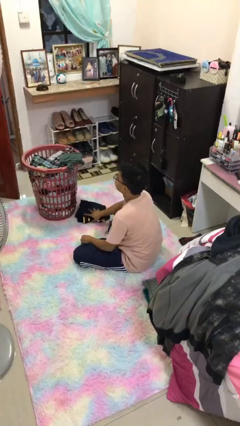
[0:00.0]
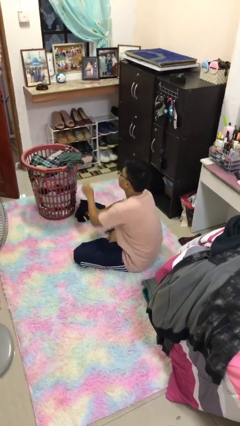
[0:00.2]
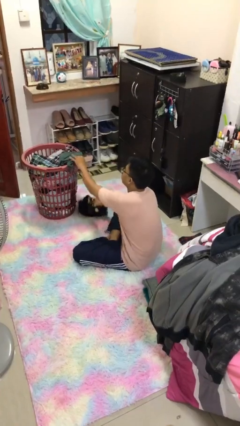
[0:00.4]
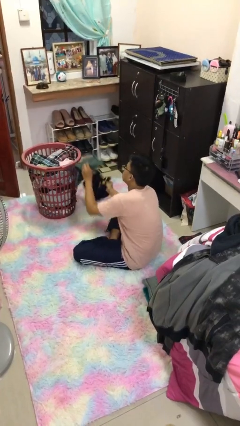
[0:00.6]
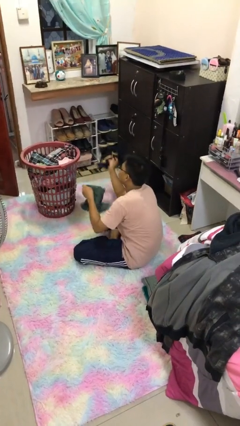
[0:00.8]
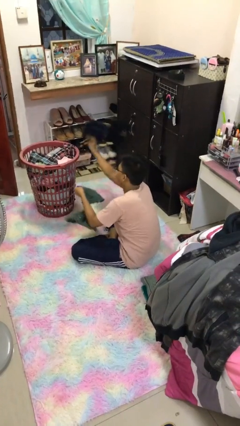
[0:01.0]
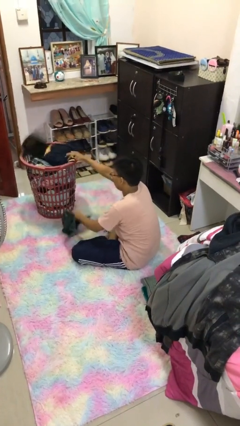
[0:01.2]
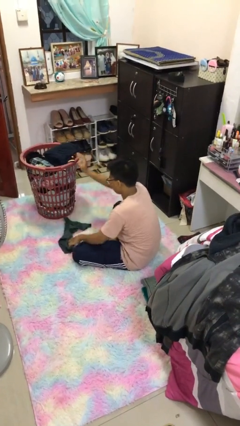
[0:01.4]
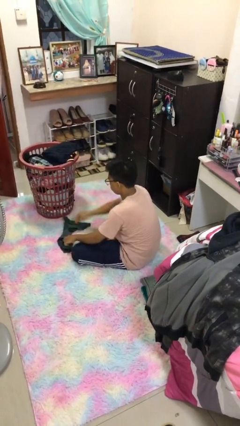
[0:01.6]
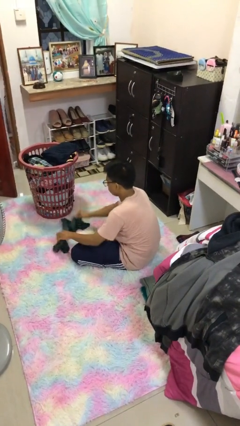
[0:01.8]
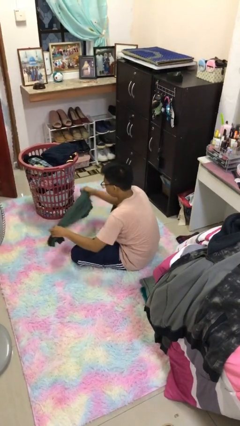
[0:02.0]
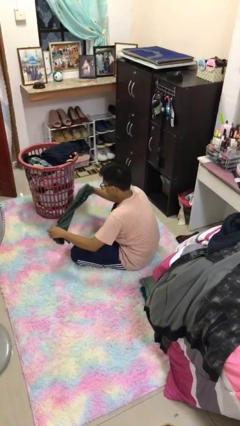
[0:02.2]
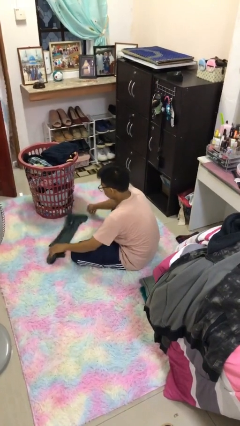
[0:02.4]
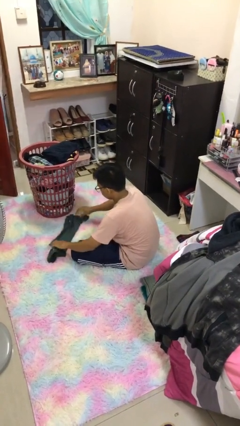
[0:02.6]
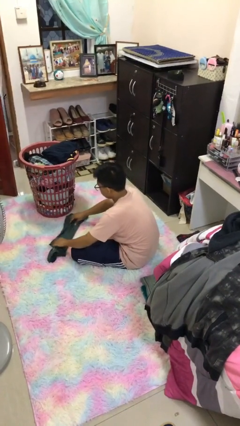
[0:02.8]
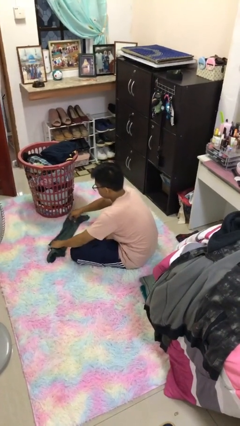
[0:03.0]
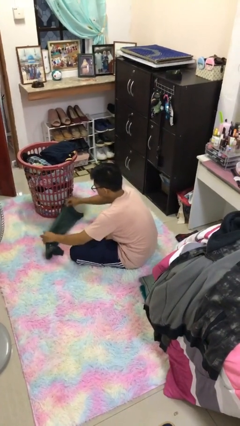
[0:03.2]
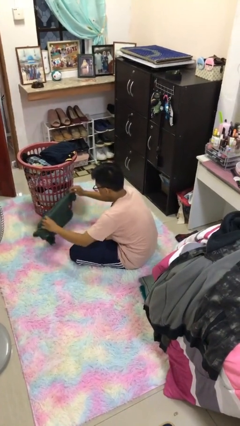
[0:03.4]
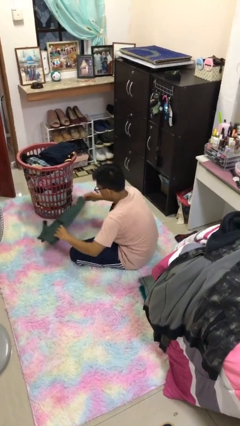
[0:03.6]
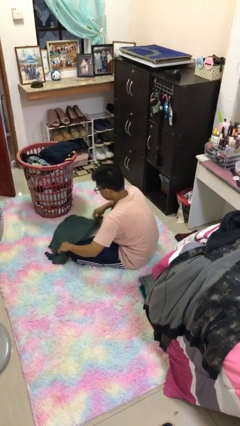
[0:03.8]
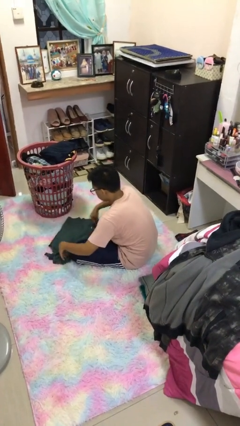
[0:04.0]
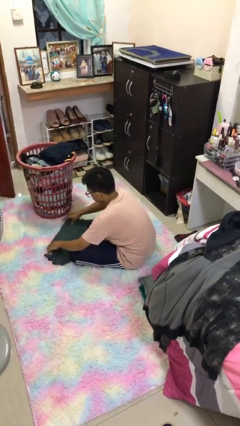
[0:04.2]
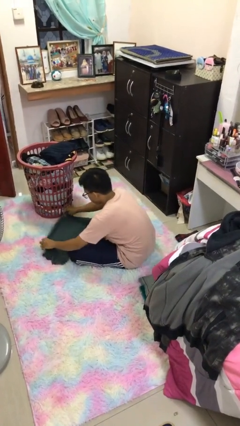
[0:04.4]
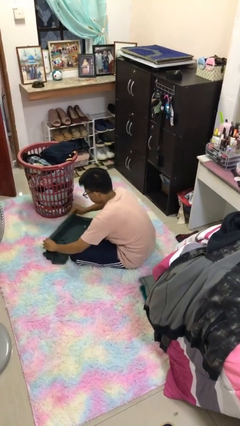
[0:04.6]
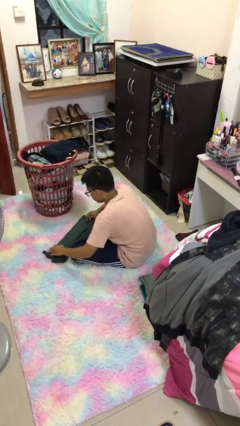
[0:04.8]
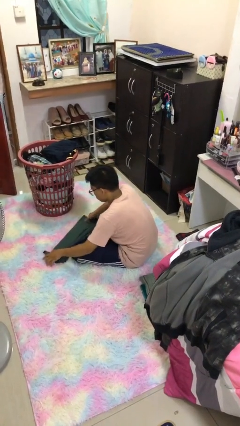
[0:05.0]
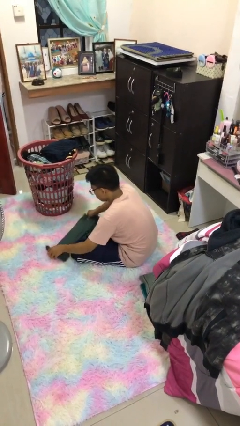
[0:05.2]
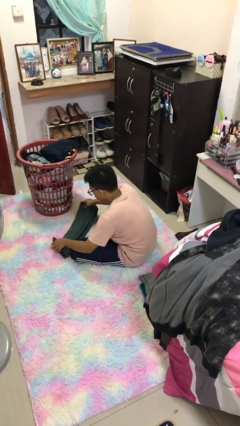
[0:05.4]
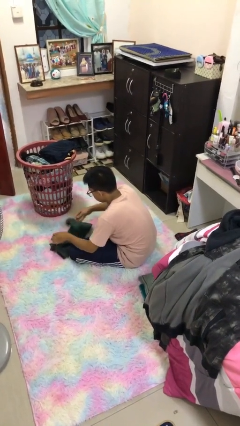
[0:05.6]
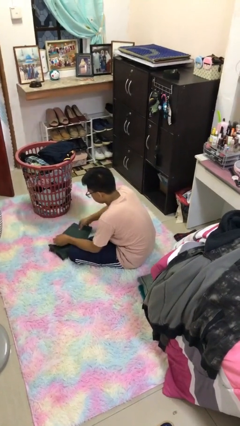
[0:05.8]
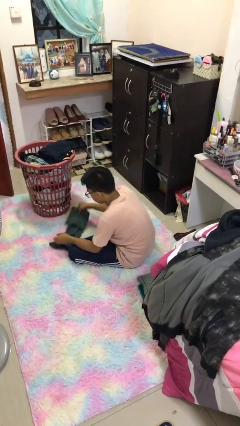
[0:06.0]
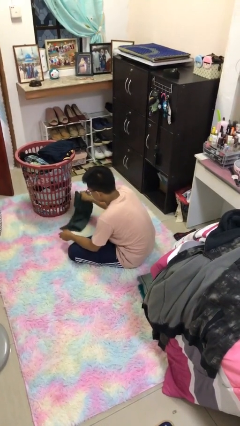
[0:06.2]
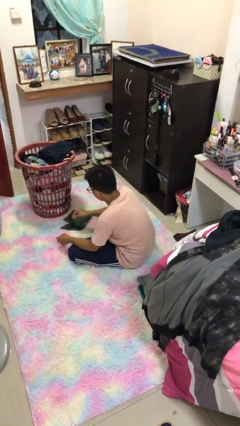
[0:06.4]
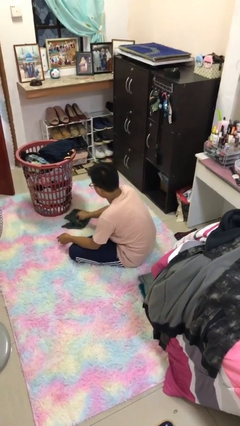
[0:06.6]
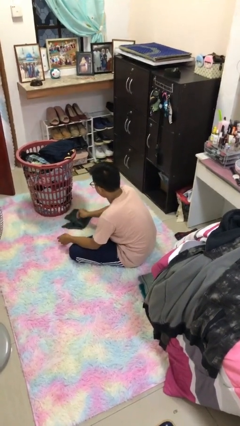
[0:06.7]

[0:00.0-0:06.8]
person folds shirt

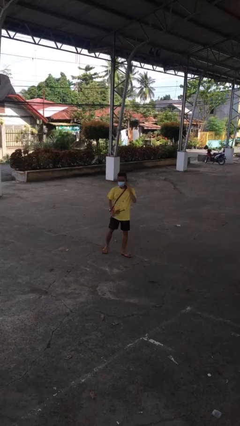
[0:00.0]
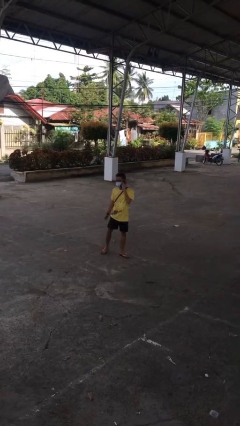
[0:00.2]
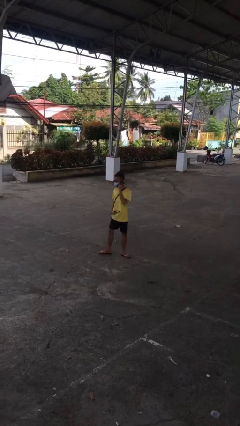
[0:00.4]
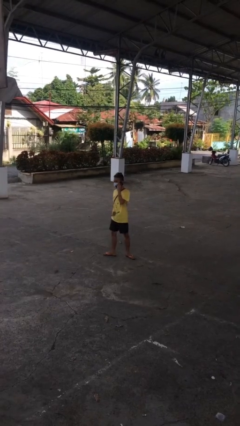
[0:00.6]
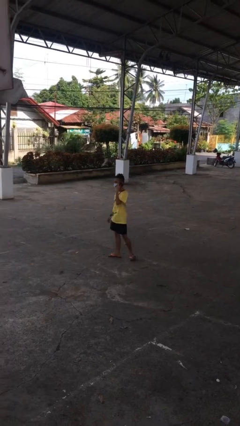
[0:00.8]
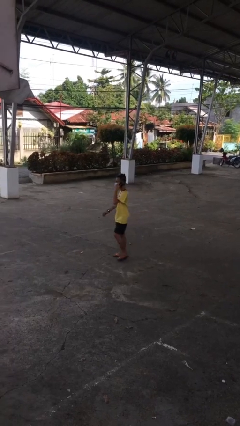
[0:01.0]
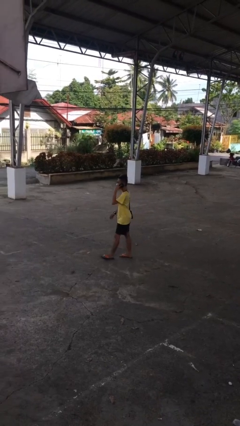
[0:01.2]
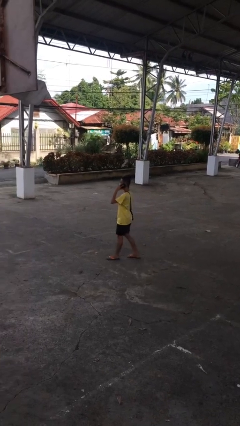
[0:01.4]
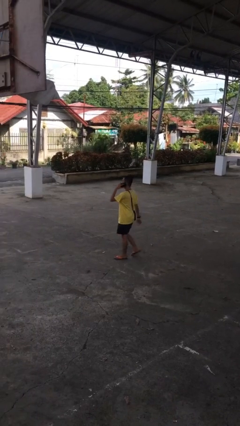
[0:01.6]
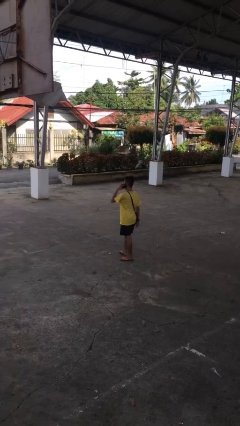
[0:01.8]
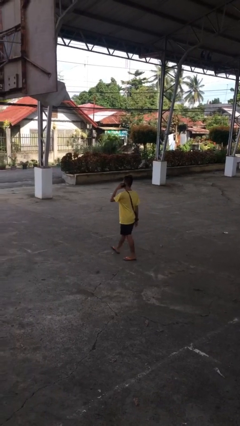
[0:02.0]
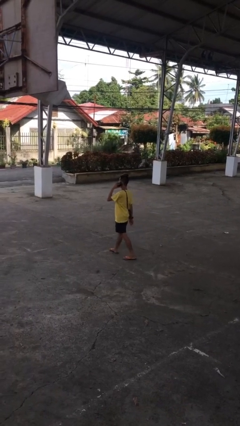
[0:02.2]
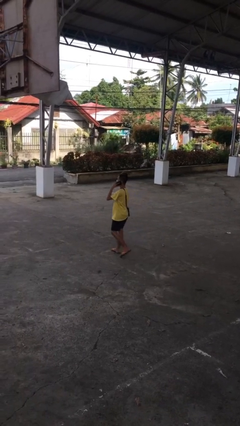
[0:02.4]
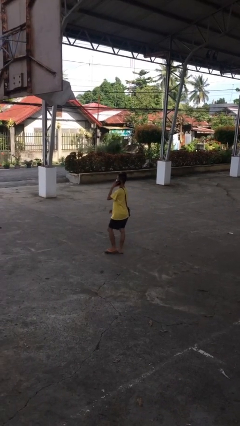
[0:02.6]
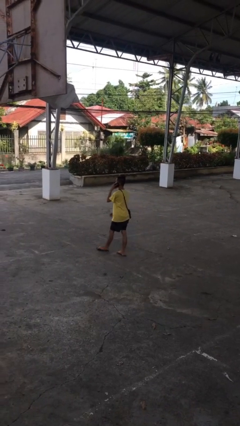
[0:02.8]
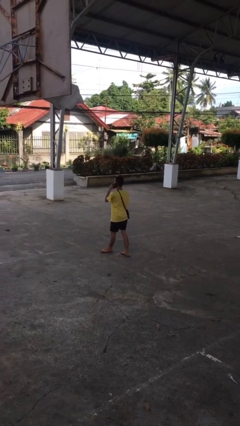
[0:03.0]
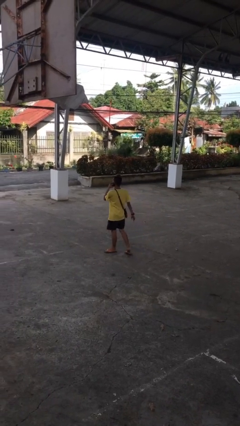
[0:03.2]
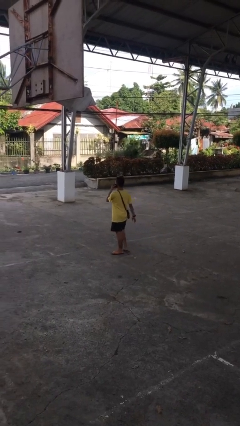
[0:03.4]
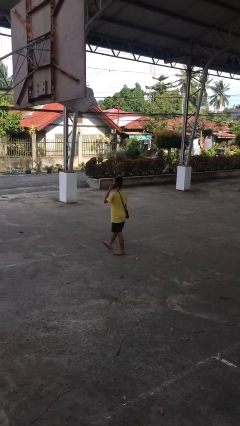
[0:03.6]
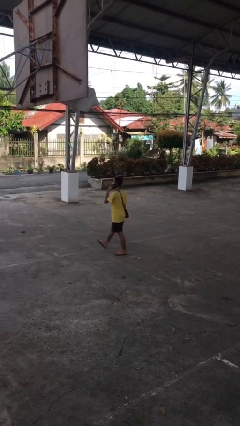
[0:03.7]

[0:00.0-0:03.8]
person talks on phone

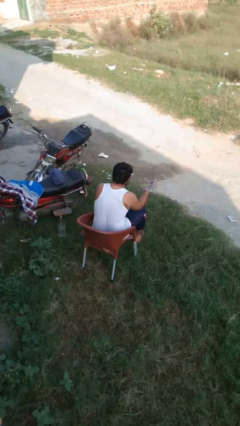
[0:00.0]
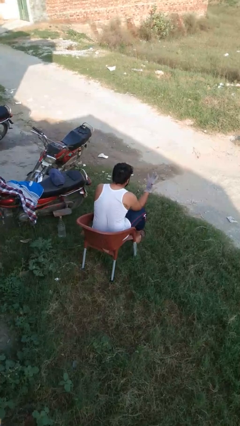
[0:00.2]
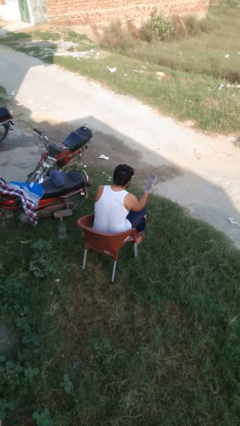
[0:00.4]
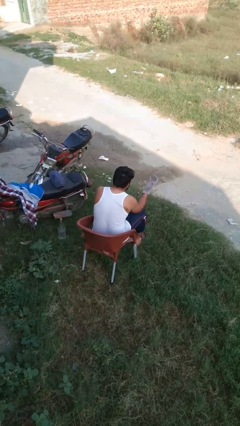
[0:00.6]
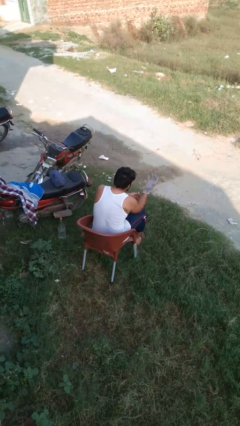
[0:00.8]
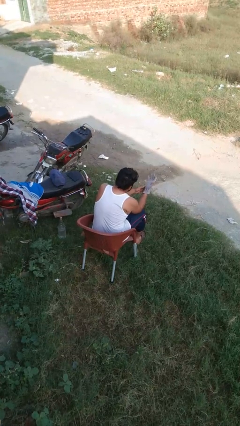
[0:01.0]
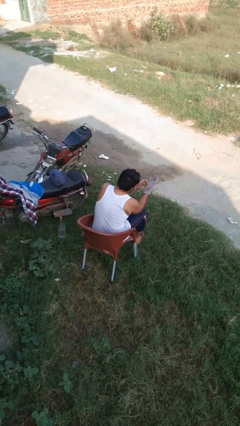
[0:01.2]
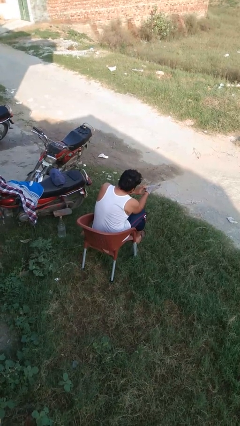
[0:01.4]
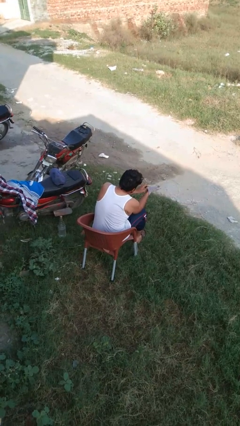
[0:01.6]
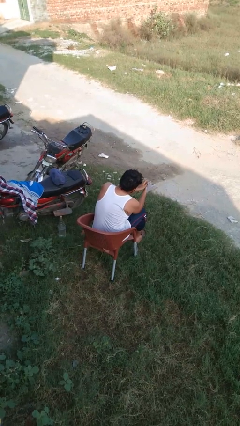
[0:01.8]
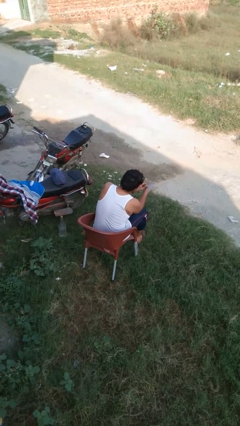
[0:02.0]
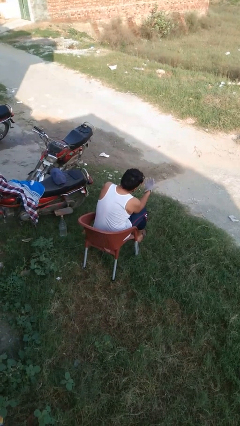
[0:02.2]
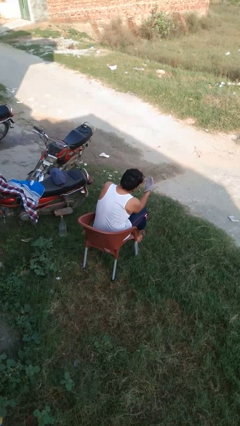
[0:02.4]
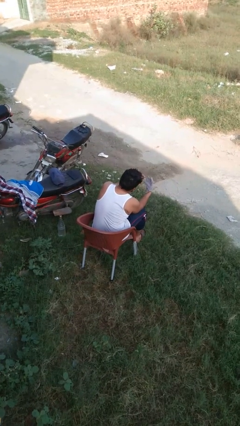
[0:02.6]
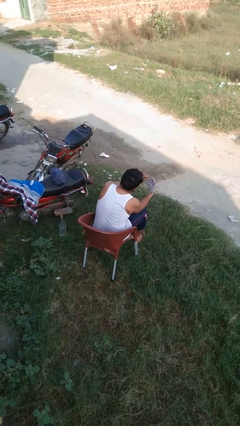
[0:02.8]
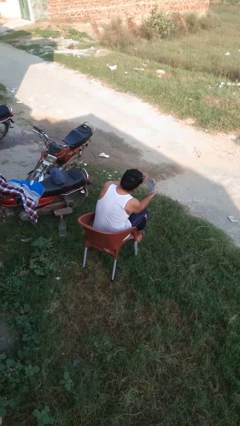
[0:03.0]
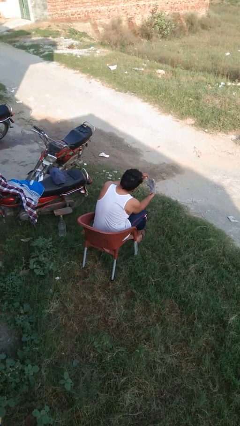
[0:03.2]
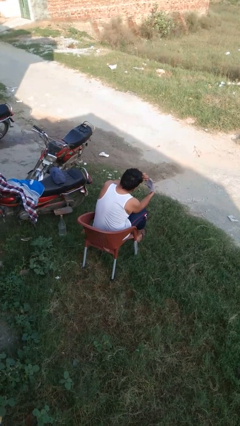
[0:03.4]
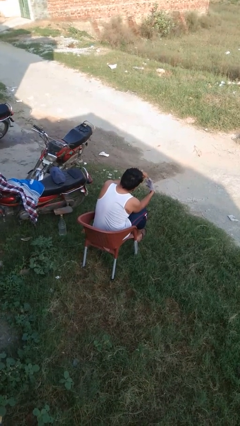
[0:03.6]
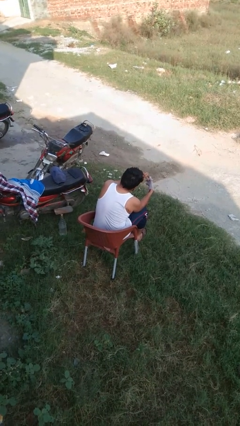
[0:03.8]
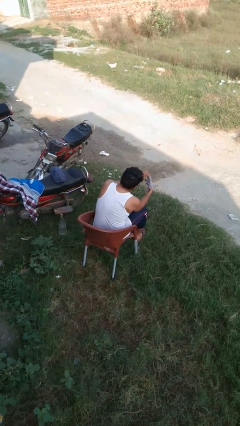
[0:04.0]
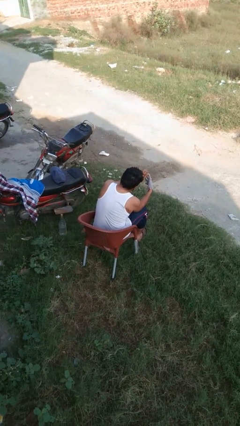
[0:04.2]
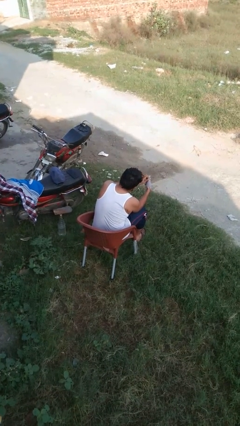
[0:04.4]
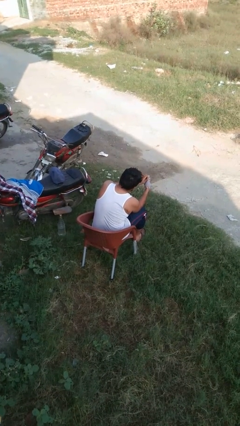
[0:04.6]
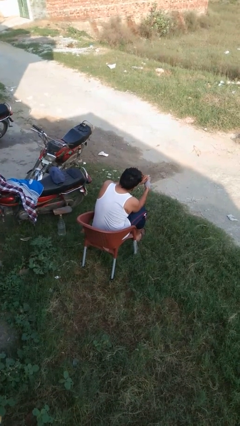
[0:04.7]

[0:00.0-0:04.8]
person takes off gloves

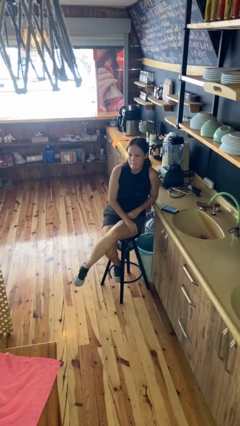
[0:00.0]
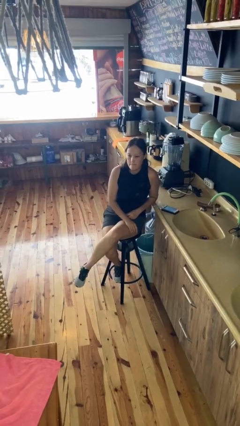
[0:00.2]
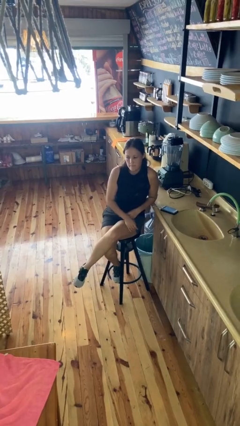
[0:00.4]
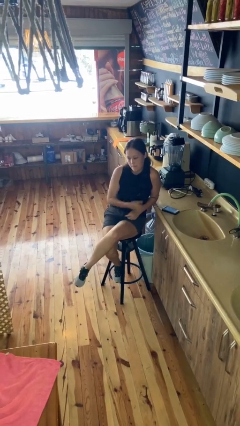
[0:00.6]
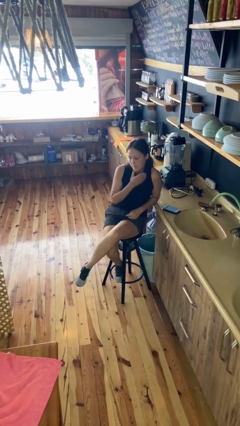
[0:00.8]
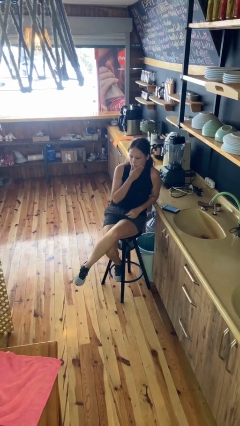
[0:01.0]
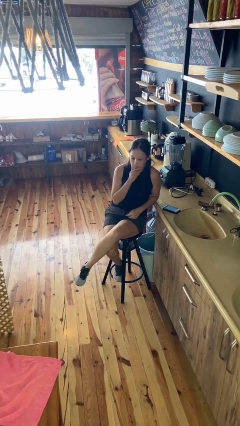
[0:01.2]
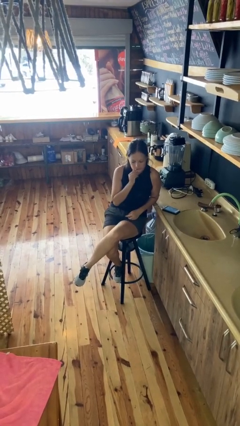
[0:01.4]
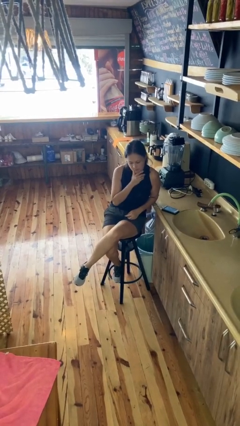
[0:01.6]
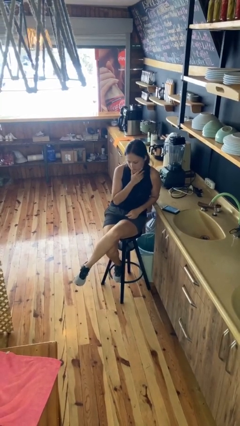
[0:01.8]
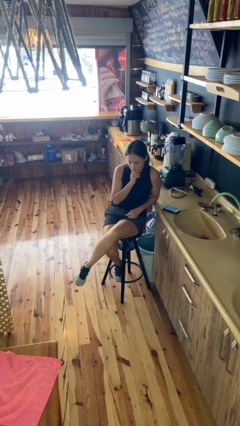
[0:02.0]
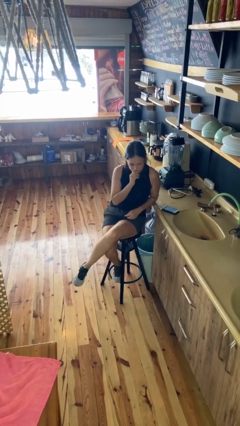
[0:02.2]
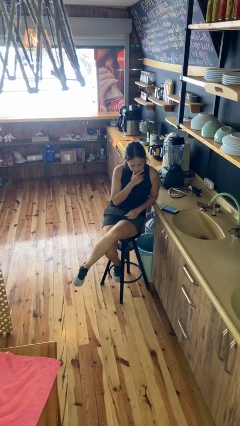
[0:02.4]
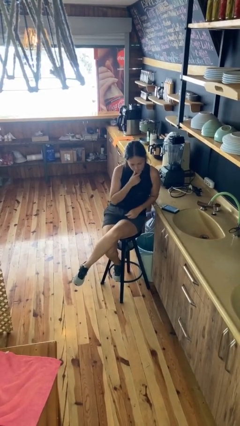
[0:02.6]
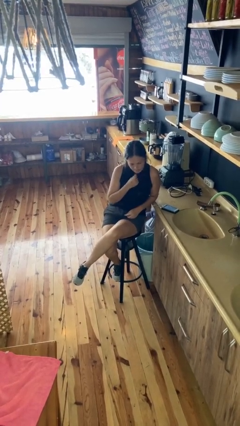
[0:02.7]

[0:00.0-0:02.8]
person strokes chin
